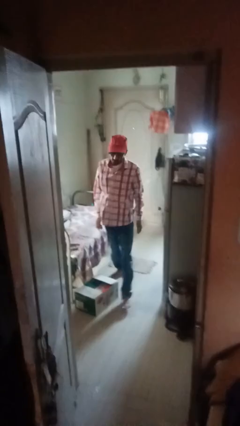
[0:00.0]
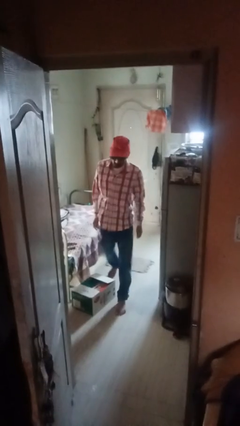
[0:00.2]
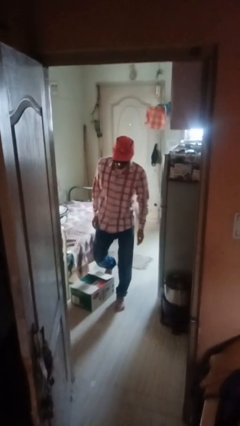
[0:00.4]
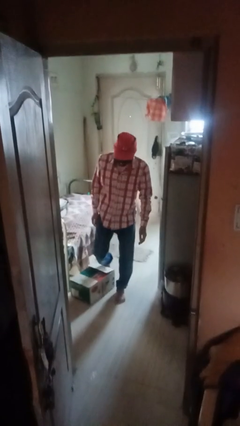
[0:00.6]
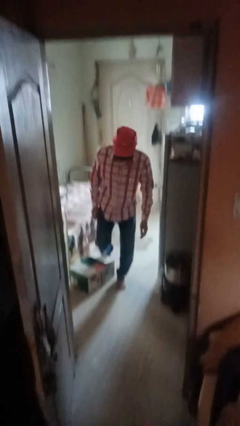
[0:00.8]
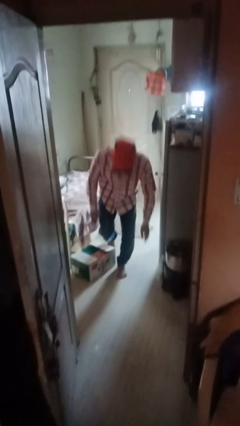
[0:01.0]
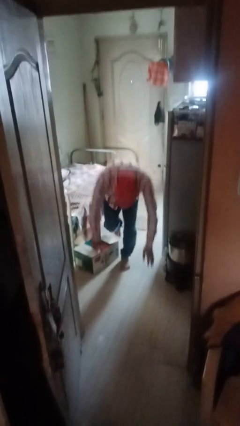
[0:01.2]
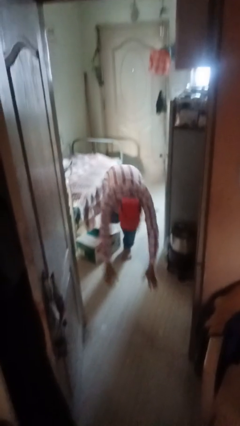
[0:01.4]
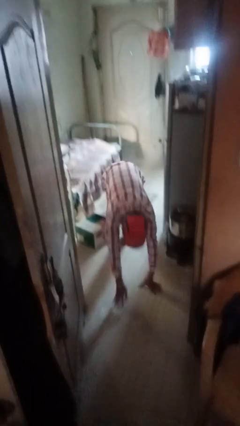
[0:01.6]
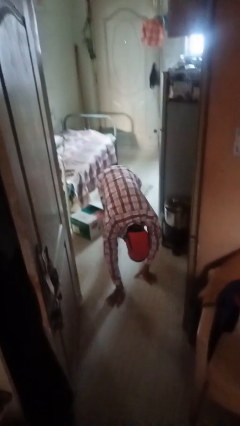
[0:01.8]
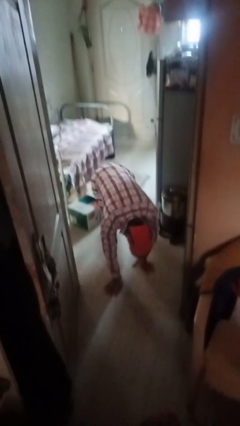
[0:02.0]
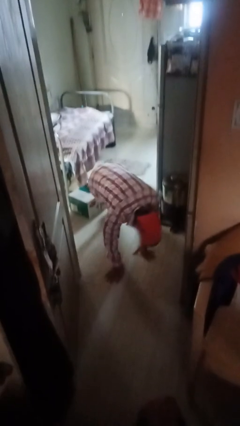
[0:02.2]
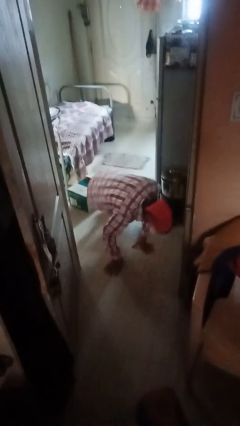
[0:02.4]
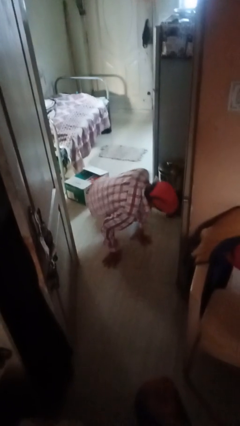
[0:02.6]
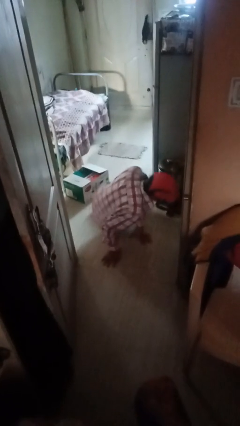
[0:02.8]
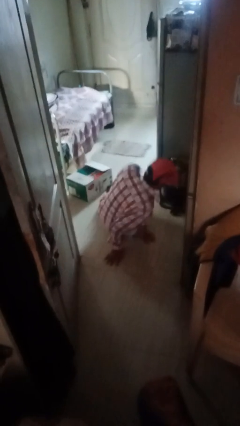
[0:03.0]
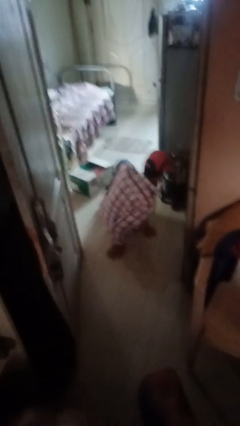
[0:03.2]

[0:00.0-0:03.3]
person trips on object on floor

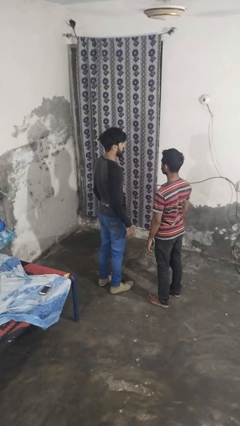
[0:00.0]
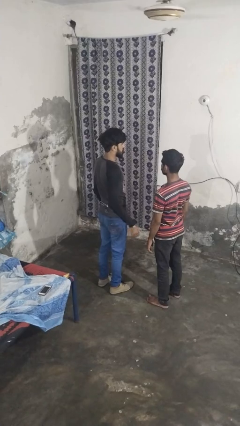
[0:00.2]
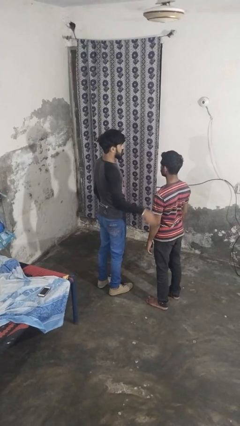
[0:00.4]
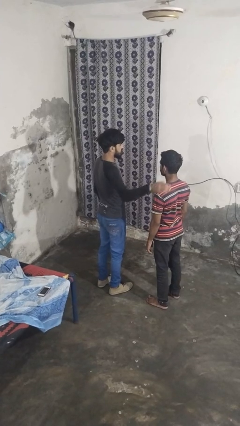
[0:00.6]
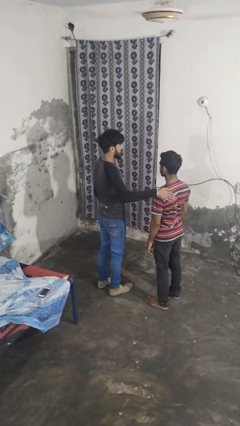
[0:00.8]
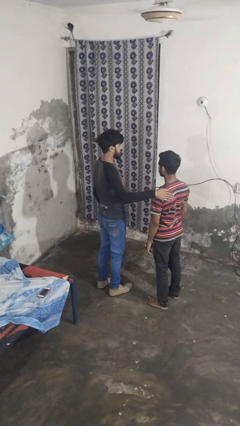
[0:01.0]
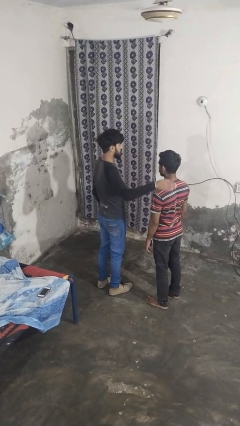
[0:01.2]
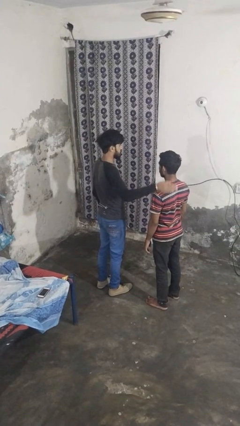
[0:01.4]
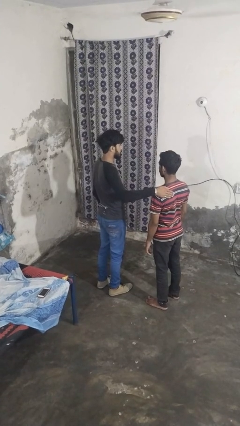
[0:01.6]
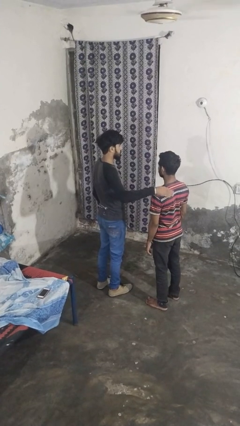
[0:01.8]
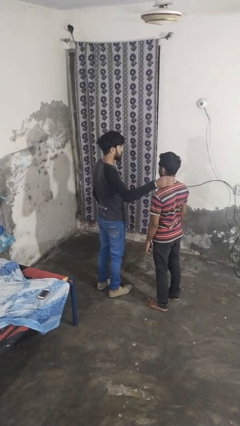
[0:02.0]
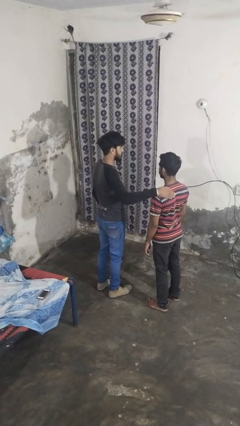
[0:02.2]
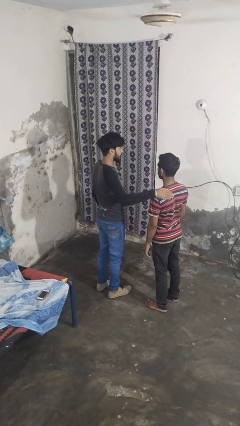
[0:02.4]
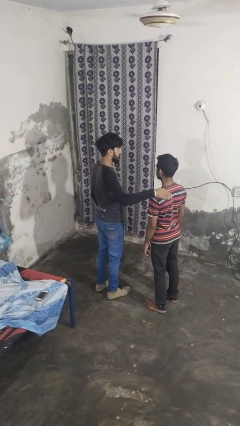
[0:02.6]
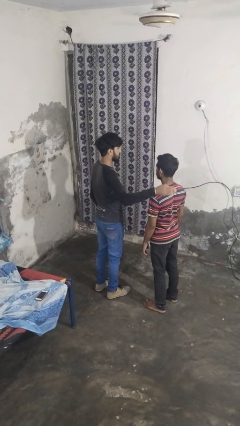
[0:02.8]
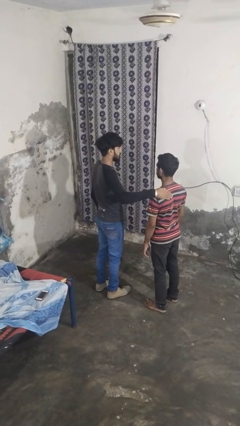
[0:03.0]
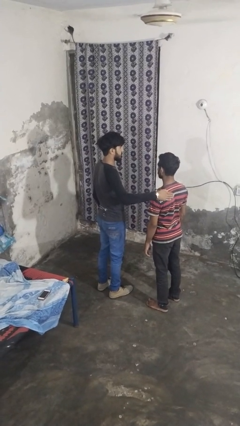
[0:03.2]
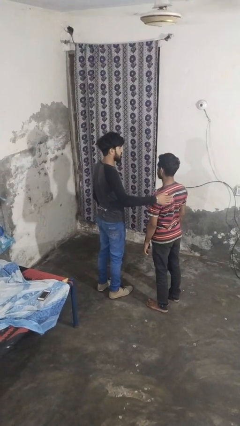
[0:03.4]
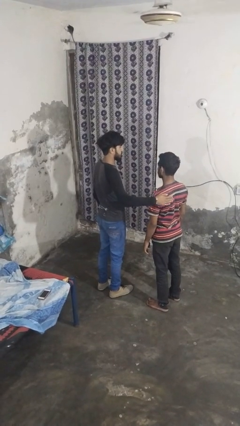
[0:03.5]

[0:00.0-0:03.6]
person pounds shoulders of person

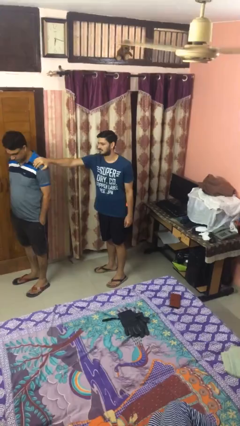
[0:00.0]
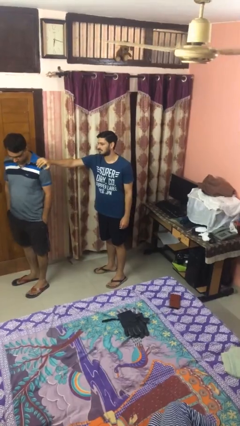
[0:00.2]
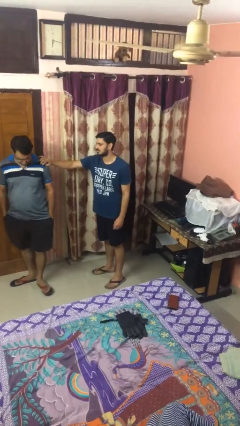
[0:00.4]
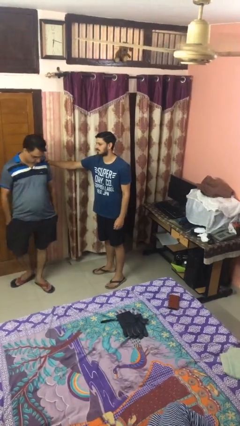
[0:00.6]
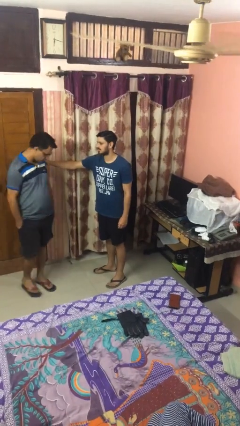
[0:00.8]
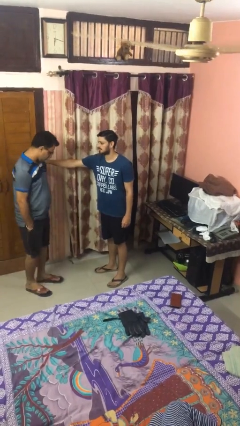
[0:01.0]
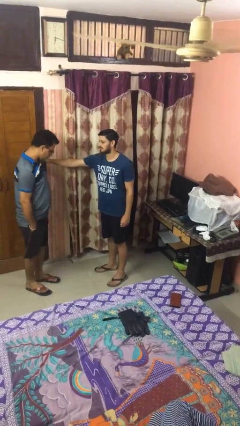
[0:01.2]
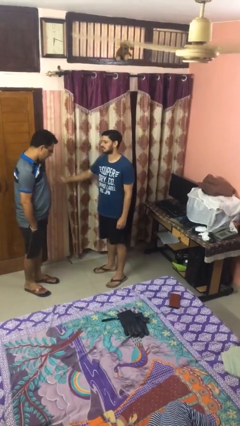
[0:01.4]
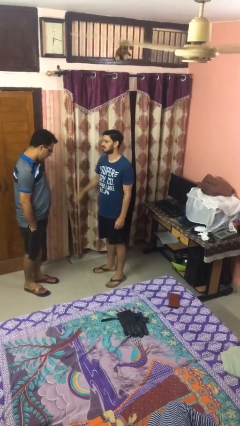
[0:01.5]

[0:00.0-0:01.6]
person spins person around

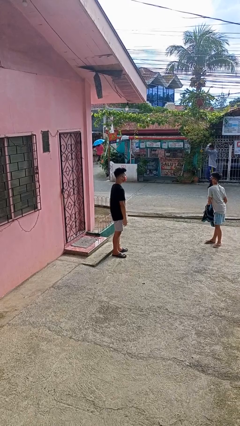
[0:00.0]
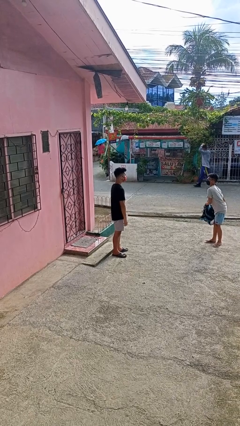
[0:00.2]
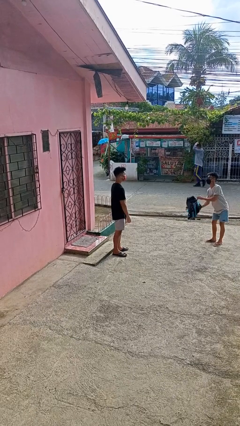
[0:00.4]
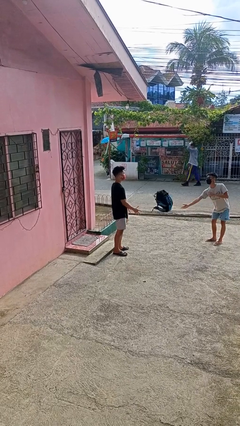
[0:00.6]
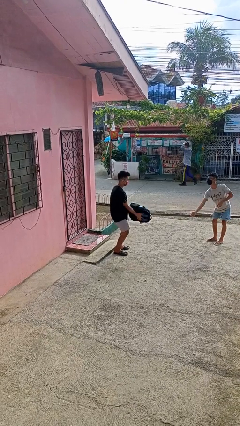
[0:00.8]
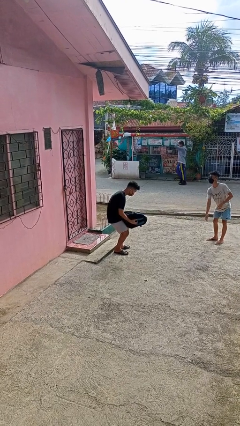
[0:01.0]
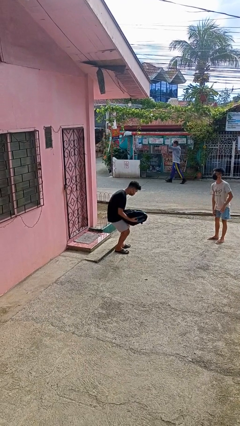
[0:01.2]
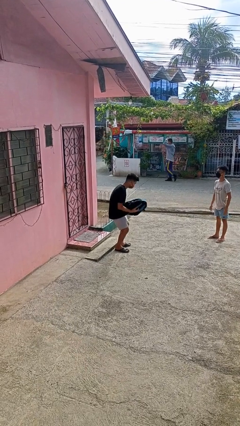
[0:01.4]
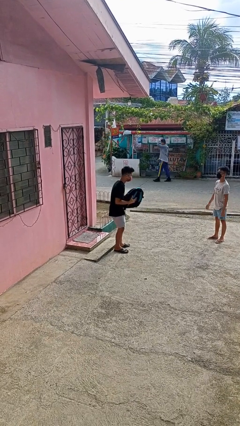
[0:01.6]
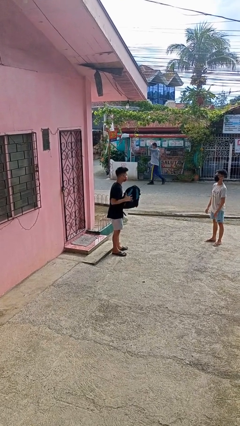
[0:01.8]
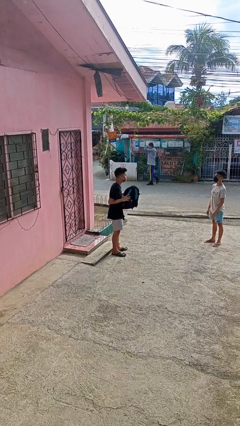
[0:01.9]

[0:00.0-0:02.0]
person catches object from person

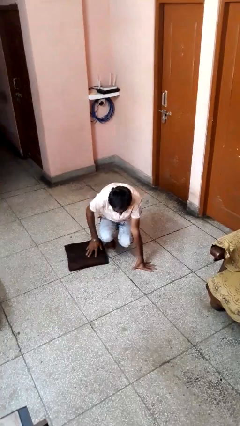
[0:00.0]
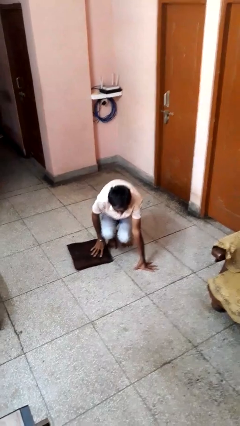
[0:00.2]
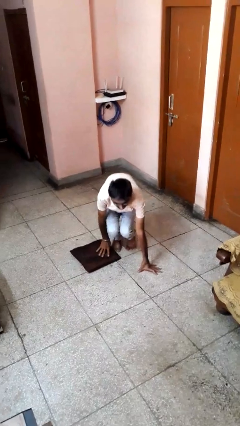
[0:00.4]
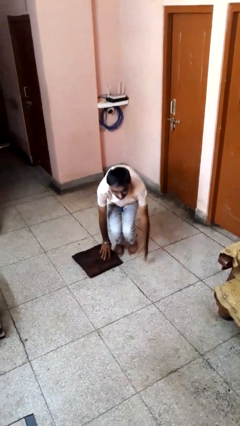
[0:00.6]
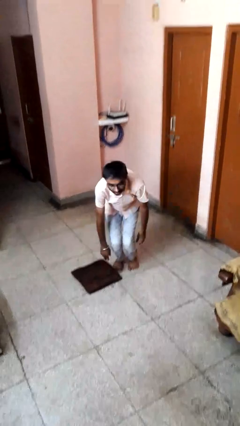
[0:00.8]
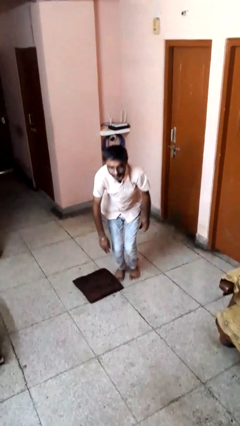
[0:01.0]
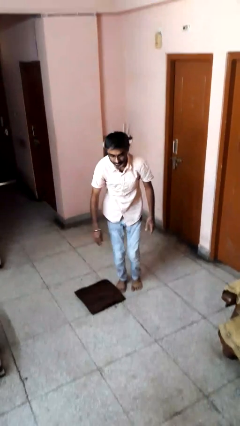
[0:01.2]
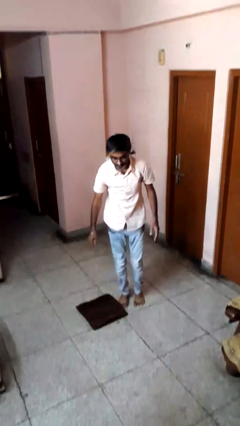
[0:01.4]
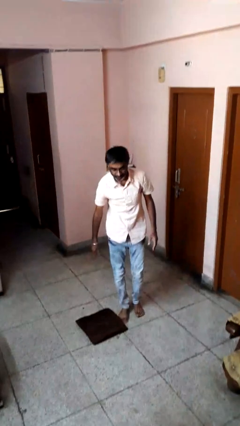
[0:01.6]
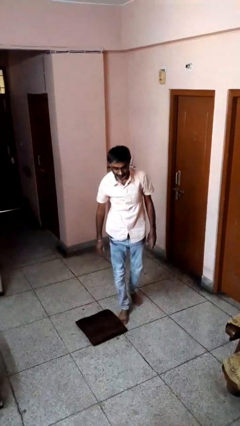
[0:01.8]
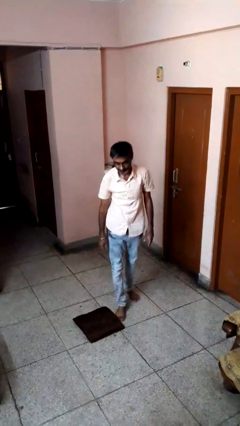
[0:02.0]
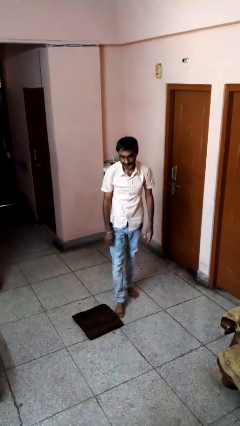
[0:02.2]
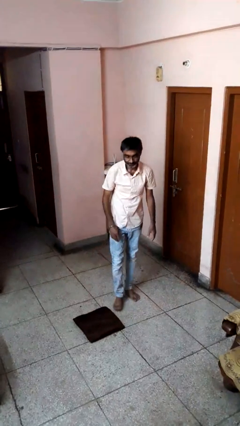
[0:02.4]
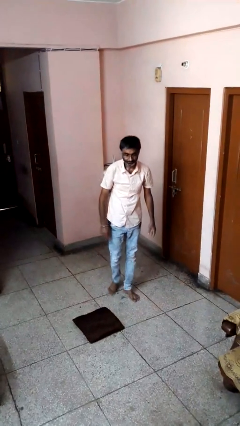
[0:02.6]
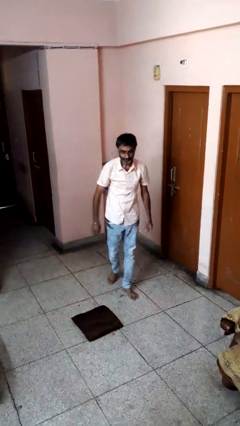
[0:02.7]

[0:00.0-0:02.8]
person stands up from floor

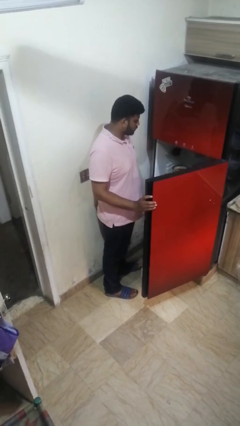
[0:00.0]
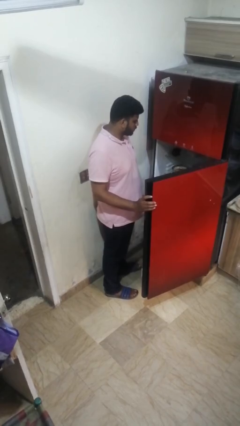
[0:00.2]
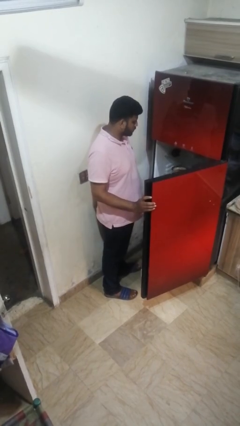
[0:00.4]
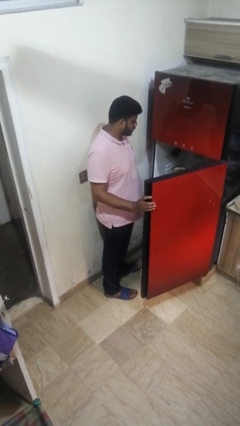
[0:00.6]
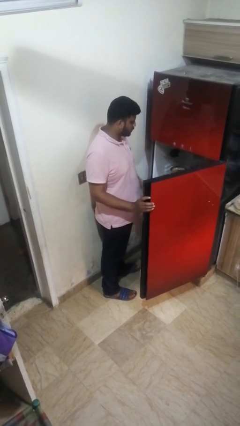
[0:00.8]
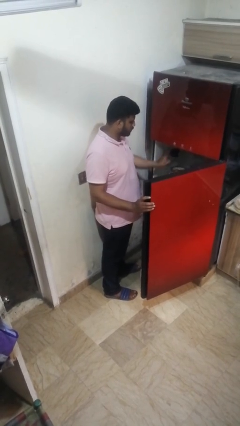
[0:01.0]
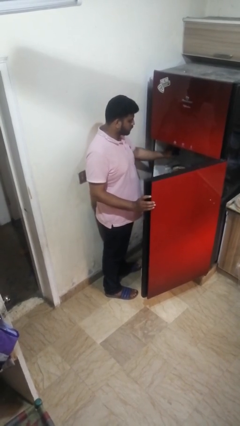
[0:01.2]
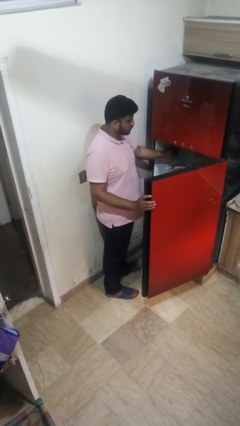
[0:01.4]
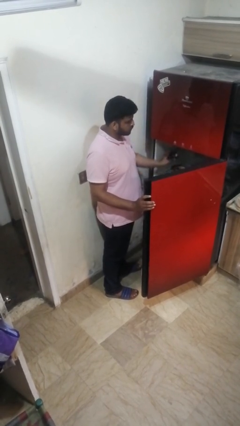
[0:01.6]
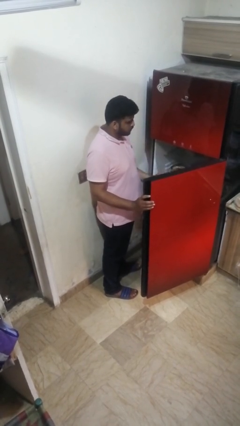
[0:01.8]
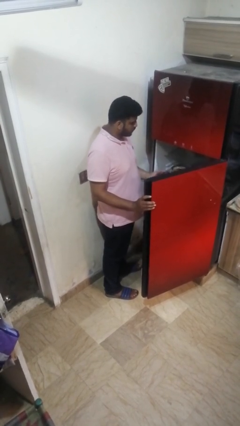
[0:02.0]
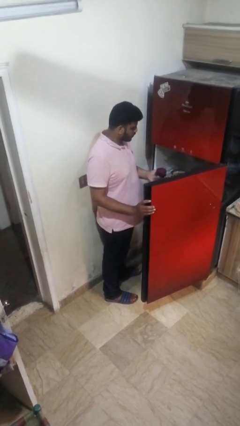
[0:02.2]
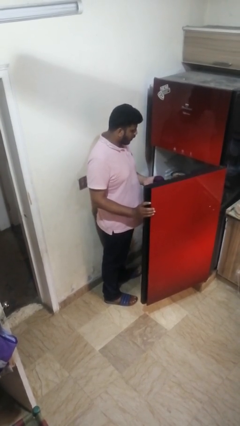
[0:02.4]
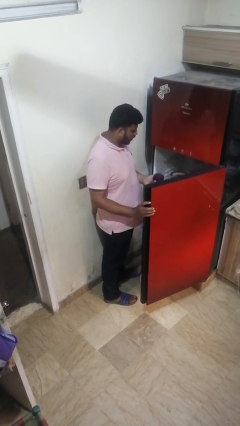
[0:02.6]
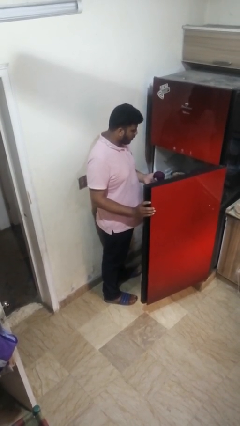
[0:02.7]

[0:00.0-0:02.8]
person takes object from refrigerator

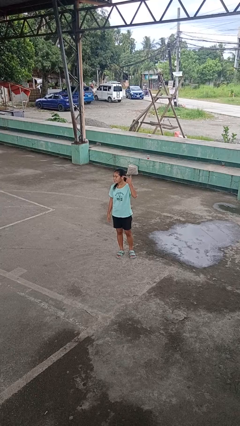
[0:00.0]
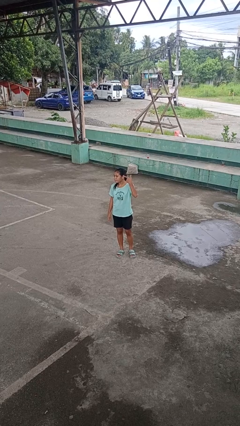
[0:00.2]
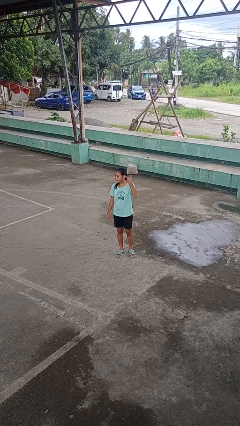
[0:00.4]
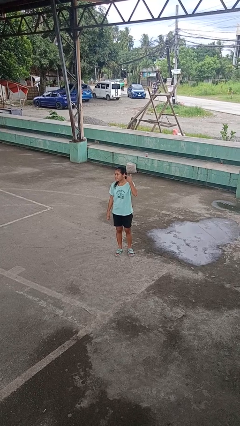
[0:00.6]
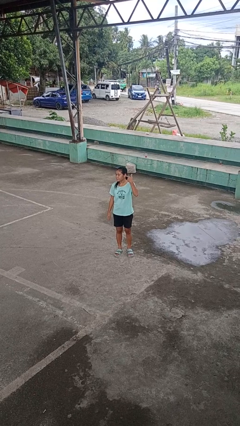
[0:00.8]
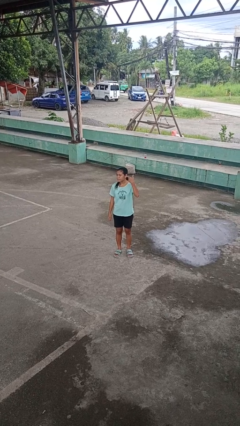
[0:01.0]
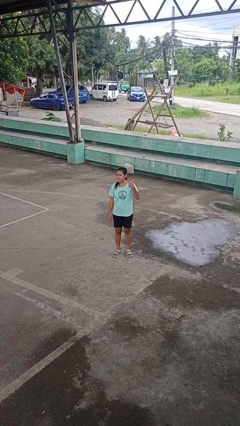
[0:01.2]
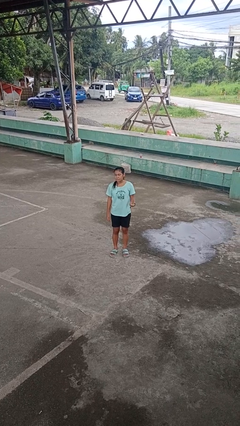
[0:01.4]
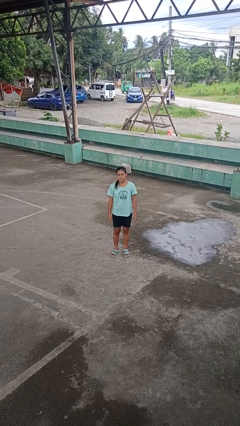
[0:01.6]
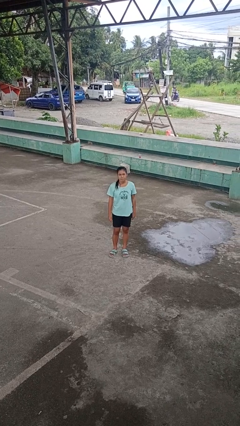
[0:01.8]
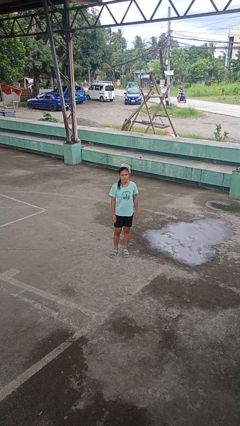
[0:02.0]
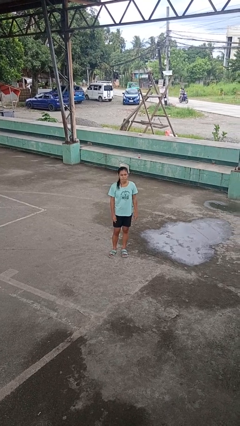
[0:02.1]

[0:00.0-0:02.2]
person gestures listen closely
